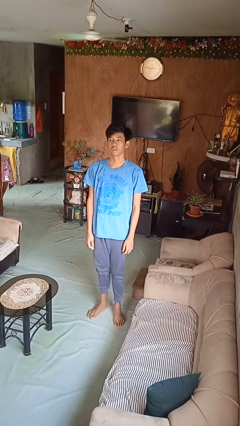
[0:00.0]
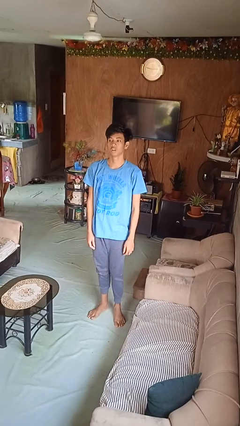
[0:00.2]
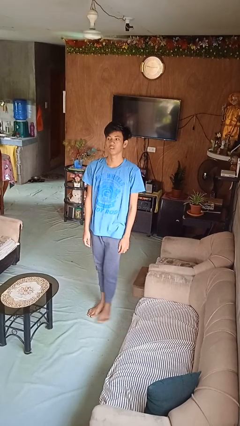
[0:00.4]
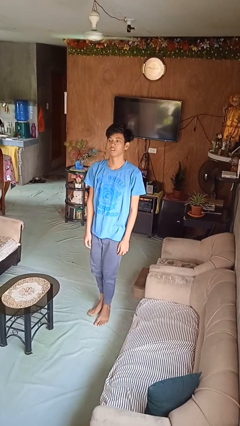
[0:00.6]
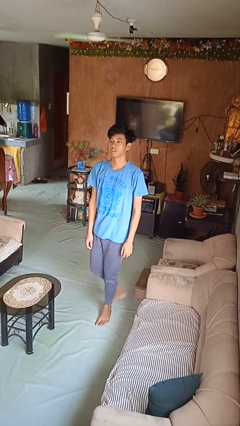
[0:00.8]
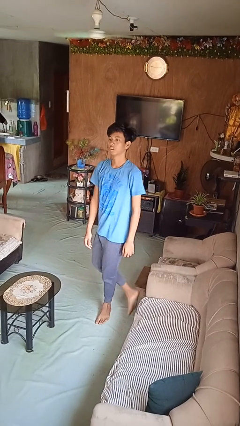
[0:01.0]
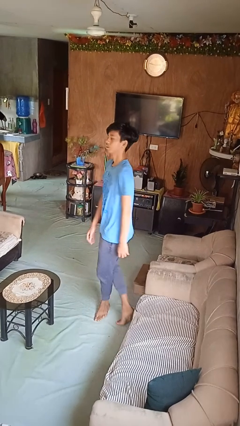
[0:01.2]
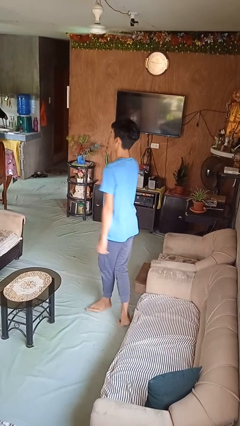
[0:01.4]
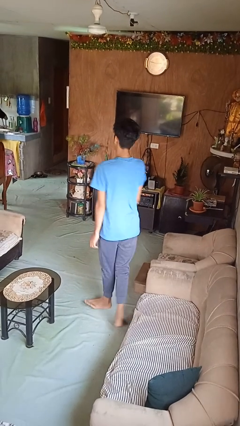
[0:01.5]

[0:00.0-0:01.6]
person twirls

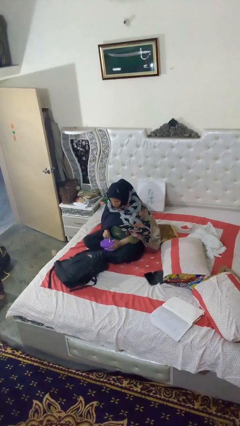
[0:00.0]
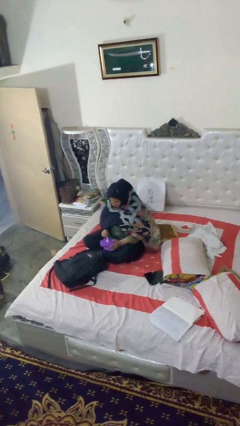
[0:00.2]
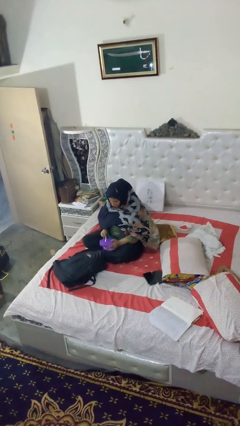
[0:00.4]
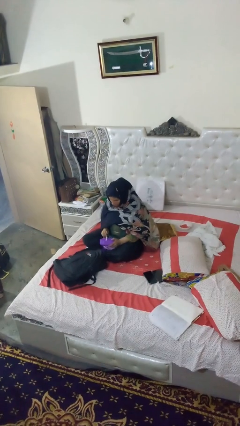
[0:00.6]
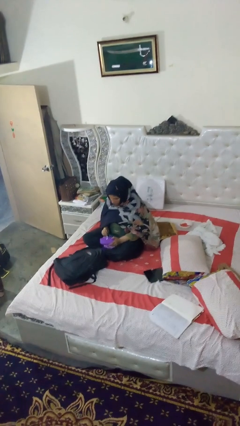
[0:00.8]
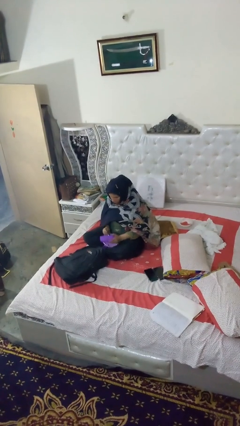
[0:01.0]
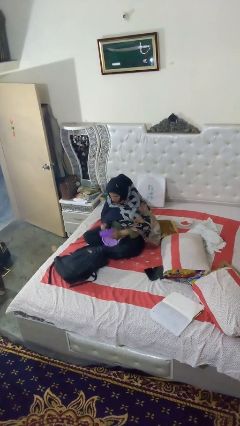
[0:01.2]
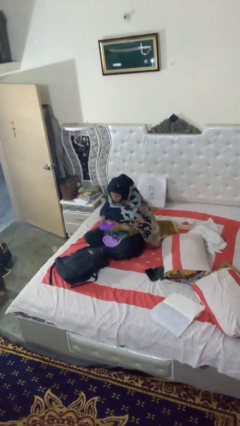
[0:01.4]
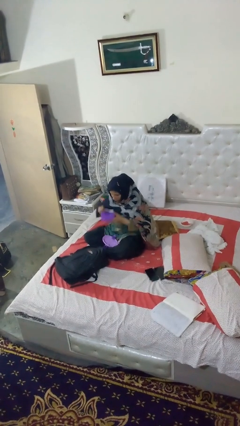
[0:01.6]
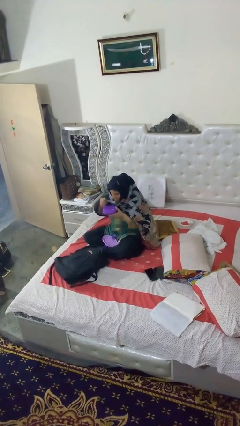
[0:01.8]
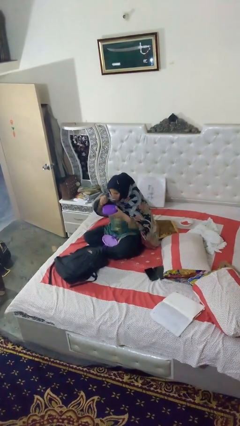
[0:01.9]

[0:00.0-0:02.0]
person eats snack from bag

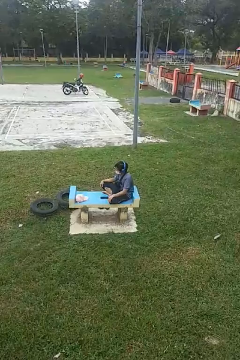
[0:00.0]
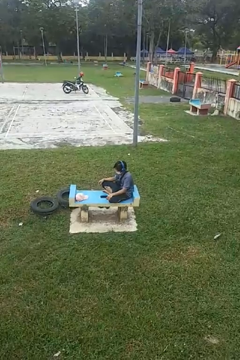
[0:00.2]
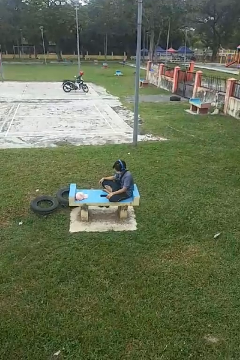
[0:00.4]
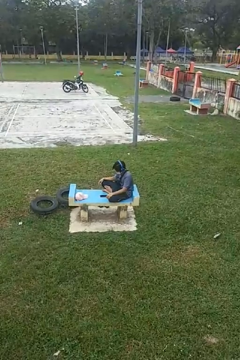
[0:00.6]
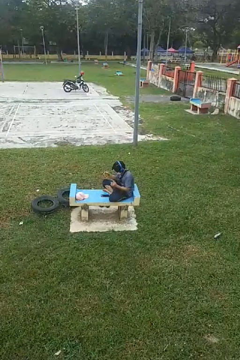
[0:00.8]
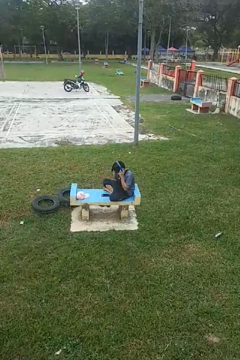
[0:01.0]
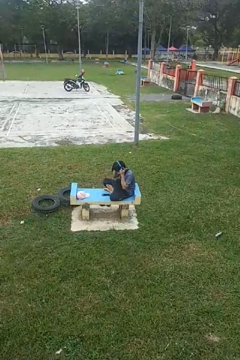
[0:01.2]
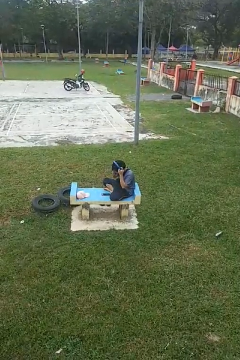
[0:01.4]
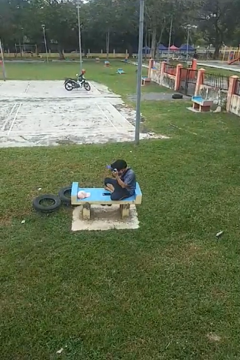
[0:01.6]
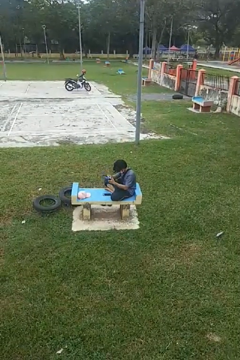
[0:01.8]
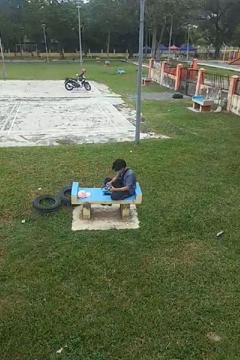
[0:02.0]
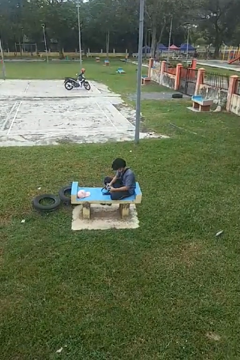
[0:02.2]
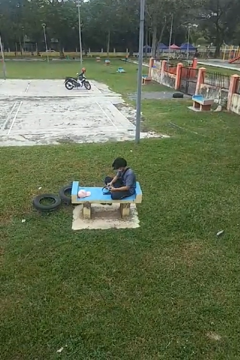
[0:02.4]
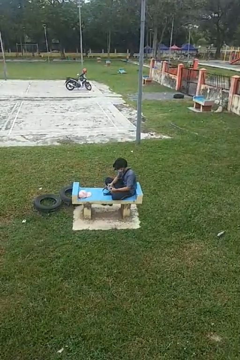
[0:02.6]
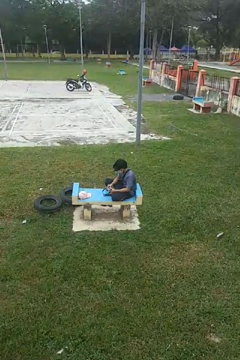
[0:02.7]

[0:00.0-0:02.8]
person takes off headphones

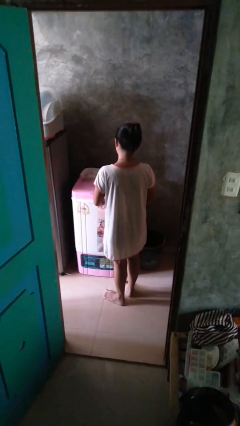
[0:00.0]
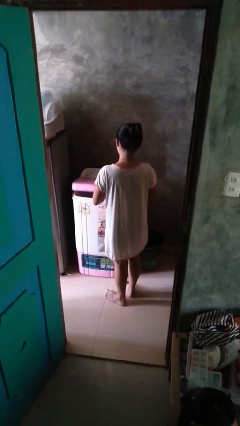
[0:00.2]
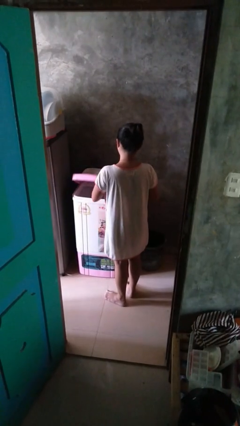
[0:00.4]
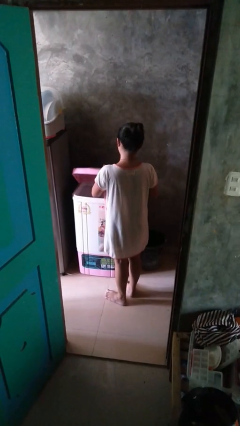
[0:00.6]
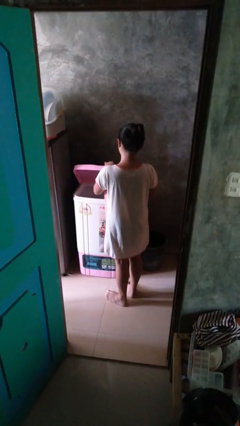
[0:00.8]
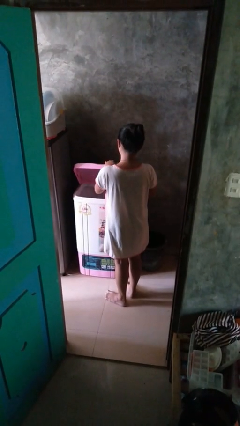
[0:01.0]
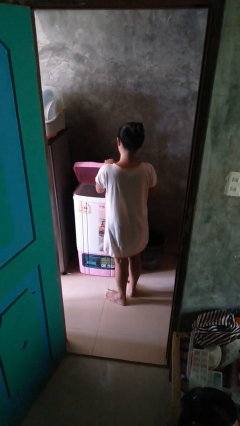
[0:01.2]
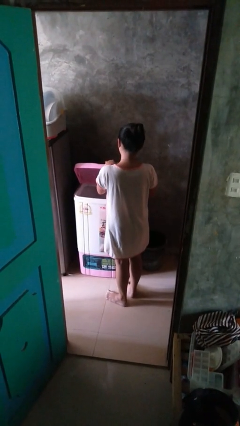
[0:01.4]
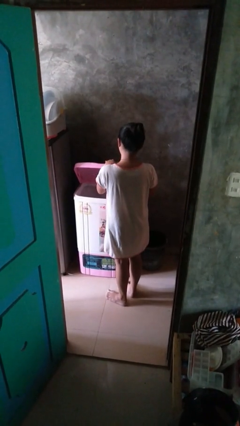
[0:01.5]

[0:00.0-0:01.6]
person opens clothes washer

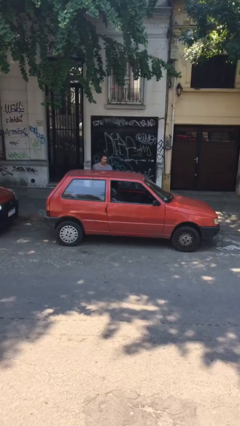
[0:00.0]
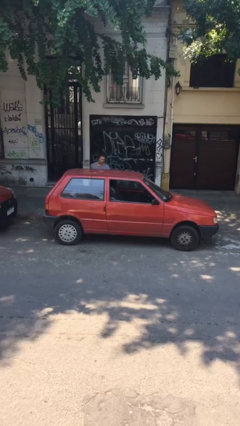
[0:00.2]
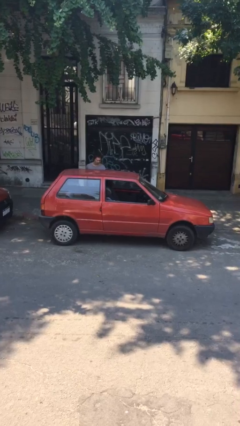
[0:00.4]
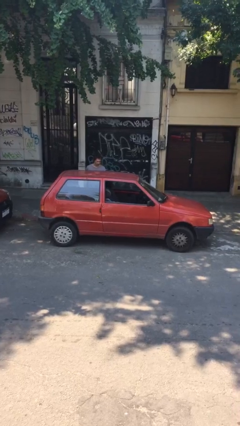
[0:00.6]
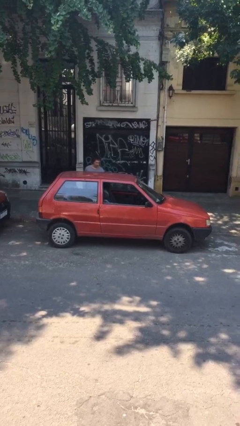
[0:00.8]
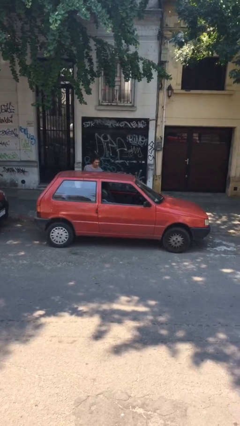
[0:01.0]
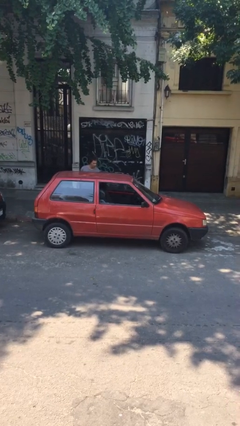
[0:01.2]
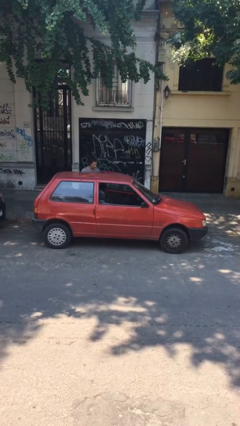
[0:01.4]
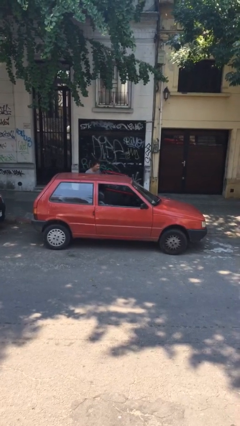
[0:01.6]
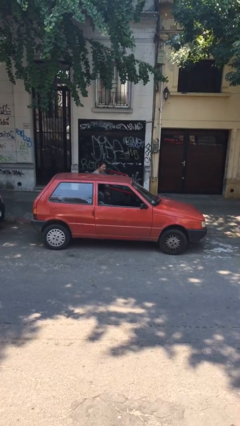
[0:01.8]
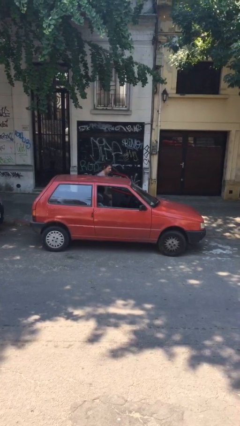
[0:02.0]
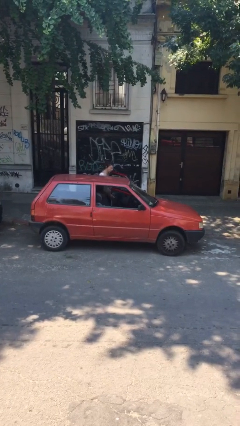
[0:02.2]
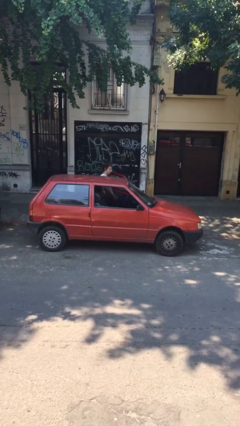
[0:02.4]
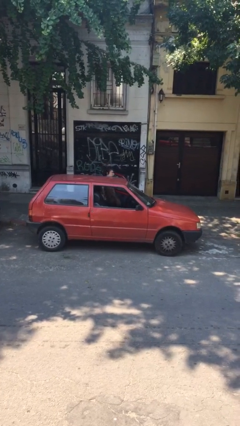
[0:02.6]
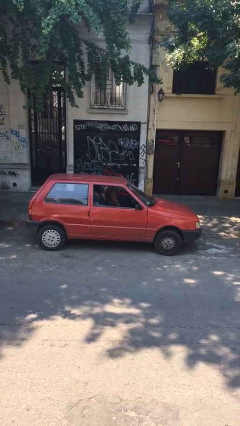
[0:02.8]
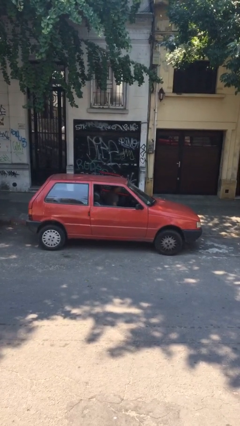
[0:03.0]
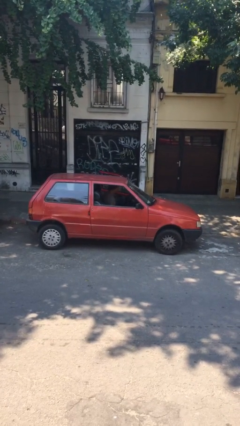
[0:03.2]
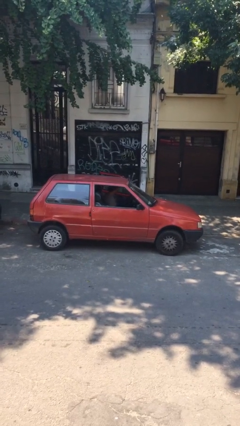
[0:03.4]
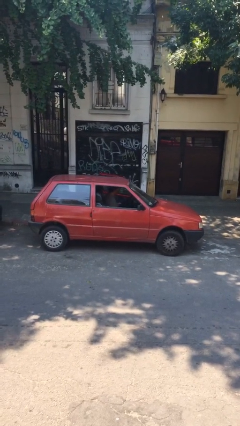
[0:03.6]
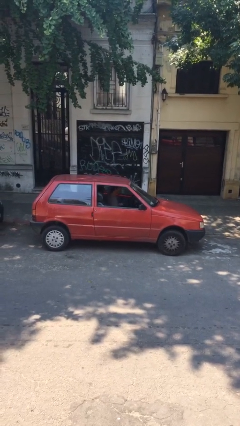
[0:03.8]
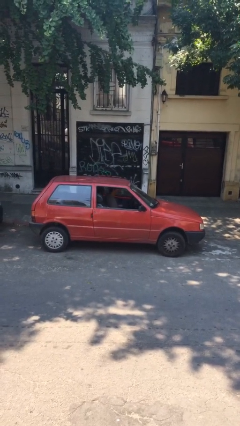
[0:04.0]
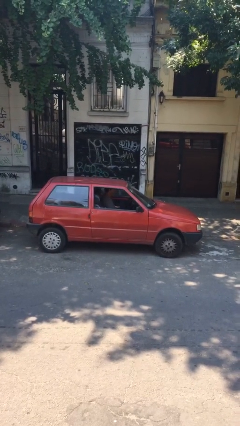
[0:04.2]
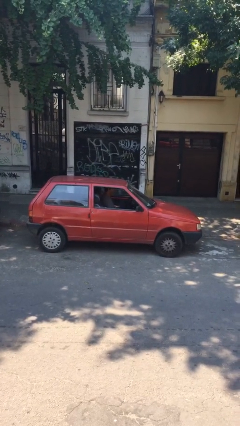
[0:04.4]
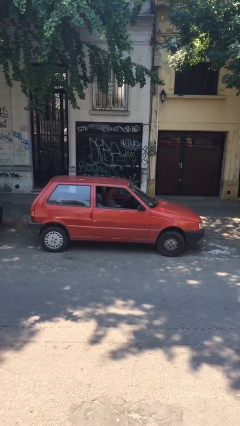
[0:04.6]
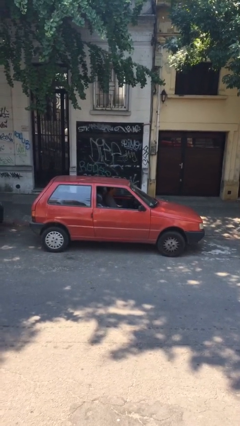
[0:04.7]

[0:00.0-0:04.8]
car picks up person

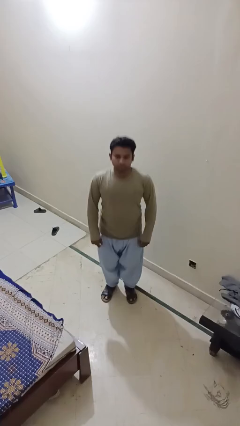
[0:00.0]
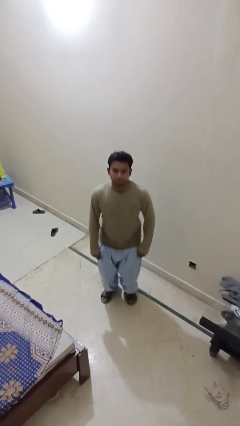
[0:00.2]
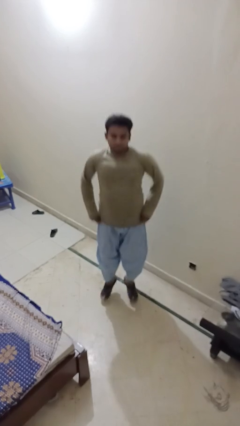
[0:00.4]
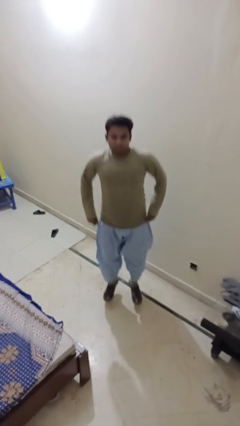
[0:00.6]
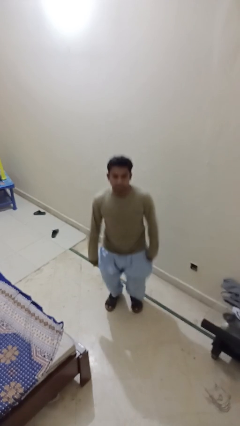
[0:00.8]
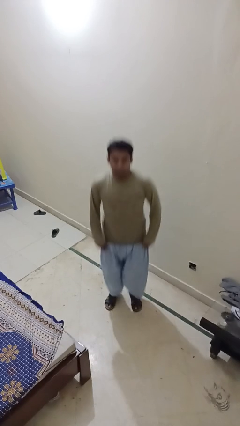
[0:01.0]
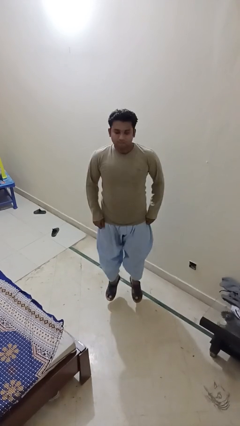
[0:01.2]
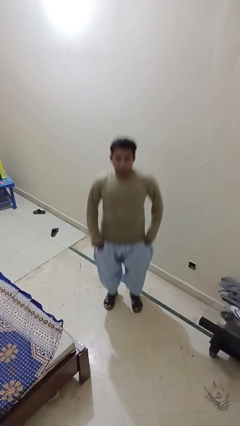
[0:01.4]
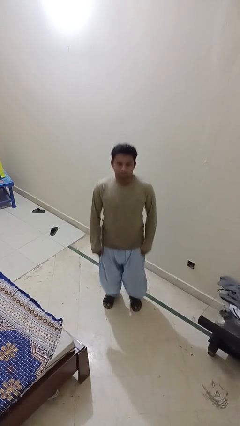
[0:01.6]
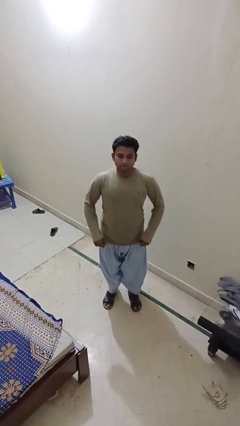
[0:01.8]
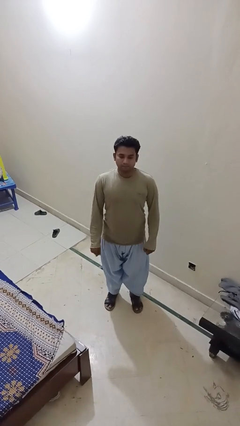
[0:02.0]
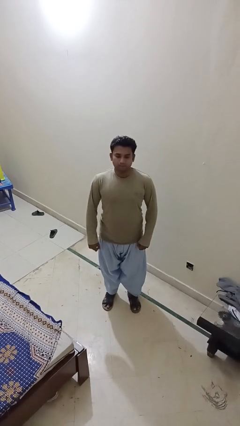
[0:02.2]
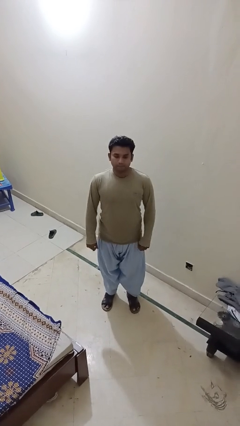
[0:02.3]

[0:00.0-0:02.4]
person jumps

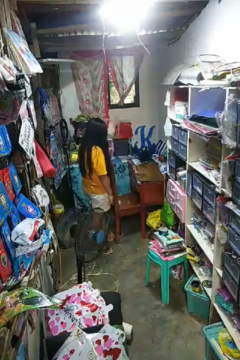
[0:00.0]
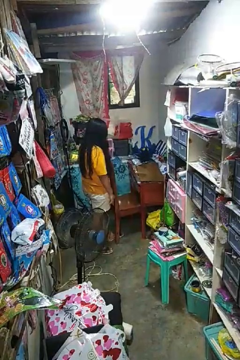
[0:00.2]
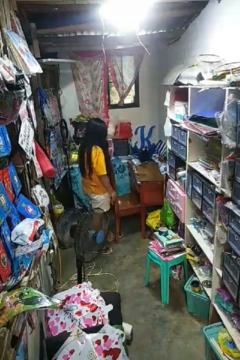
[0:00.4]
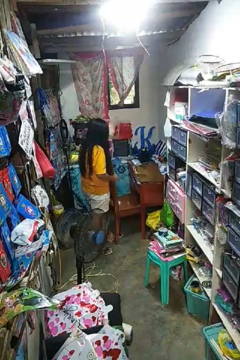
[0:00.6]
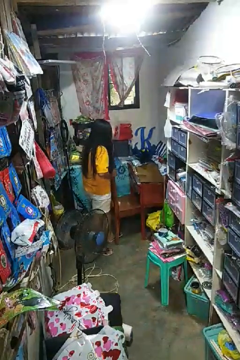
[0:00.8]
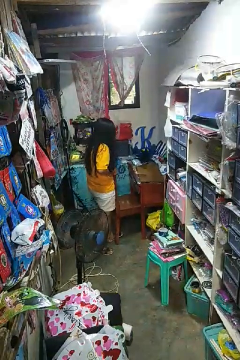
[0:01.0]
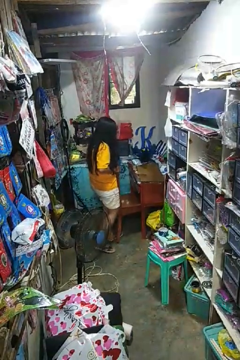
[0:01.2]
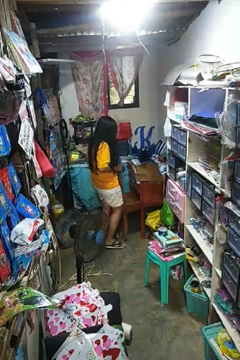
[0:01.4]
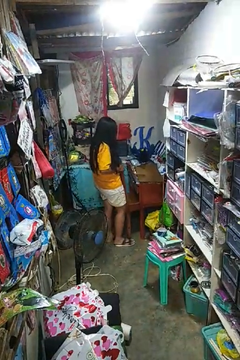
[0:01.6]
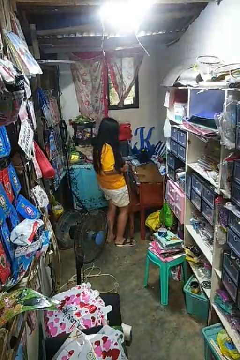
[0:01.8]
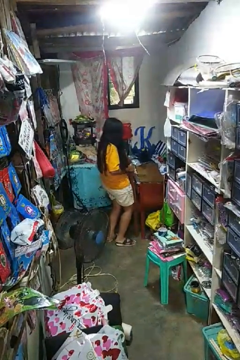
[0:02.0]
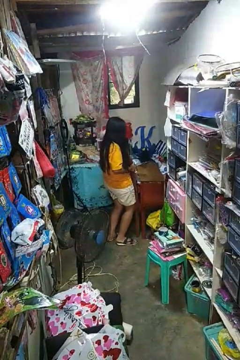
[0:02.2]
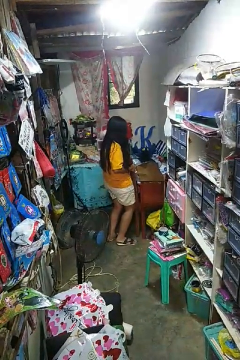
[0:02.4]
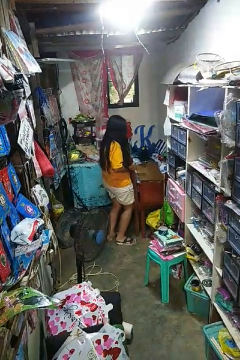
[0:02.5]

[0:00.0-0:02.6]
person pushes in chair

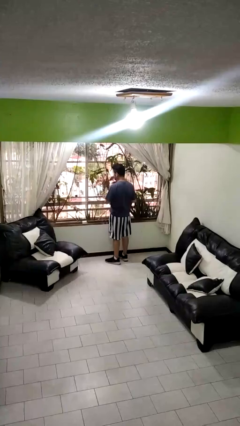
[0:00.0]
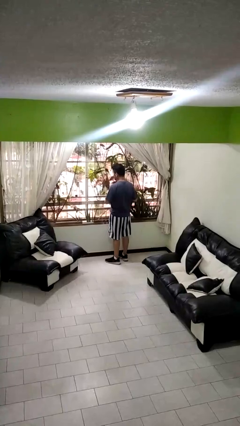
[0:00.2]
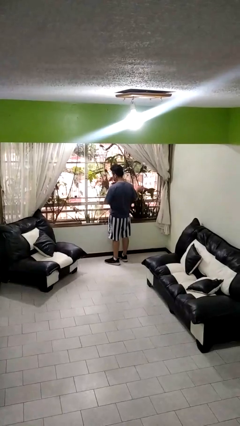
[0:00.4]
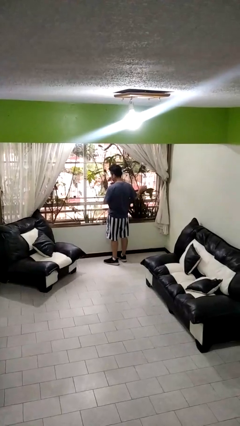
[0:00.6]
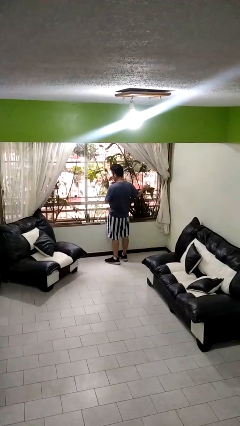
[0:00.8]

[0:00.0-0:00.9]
person opens home window
